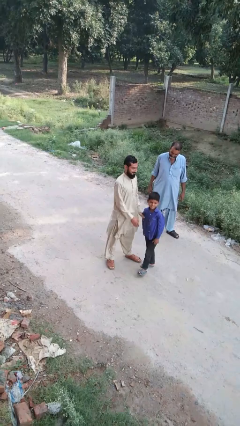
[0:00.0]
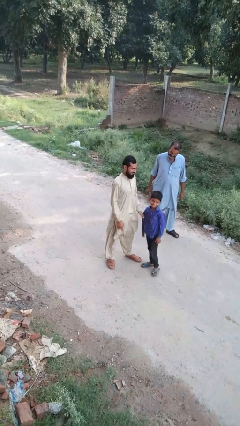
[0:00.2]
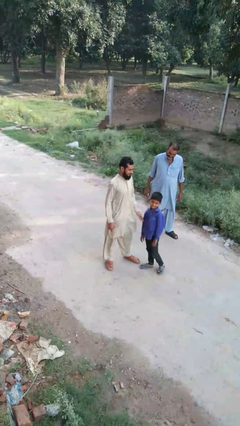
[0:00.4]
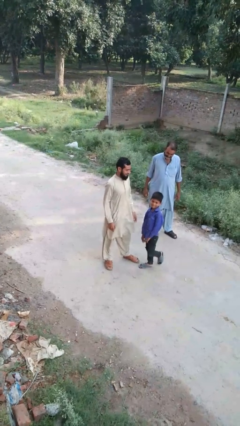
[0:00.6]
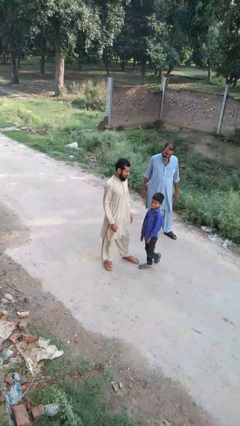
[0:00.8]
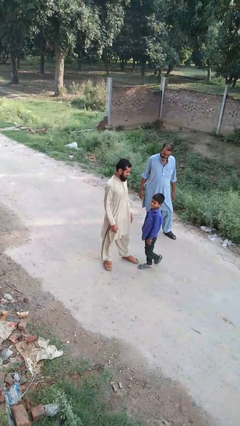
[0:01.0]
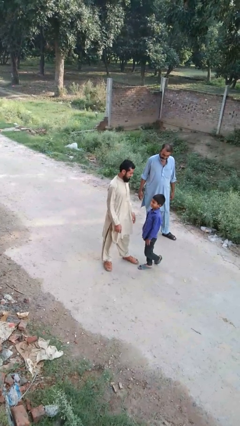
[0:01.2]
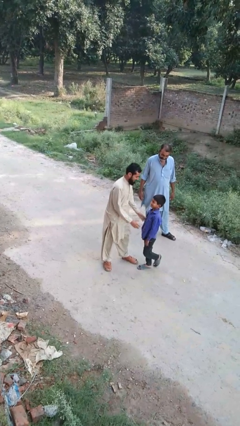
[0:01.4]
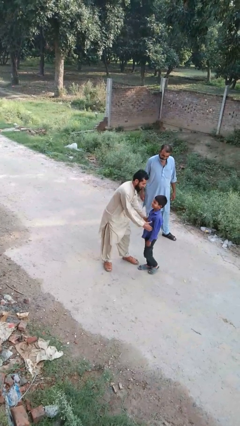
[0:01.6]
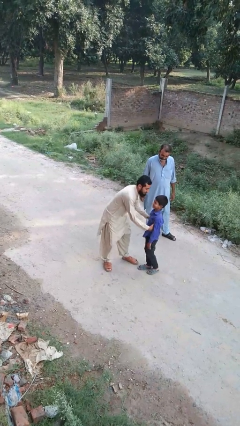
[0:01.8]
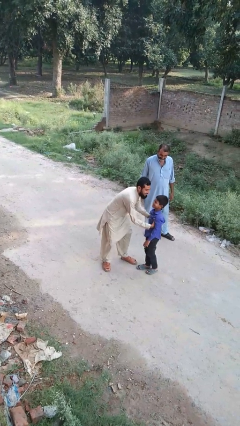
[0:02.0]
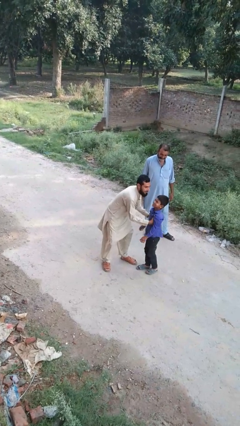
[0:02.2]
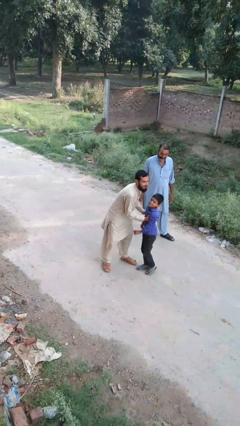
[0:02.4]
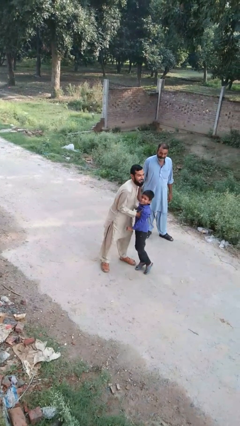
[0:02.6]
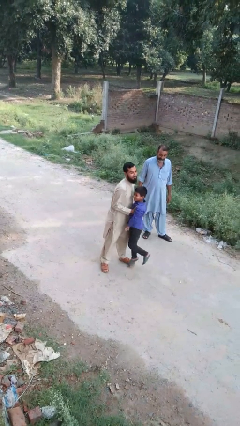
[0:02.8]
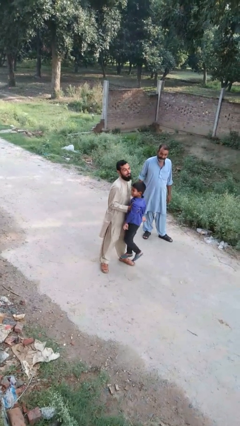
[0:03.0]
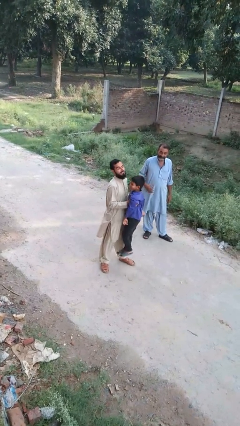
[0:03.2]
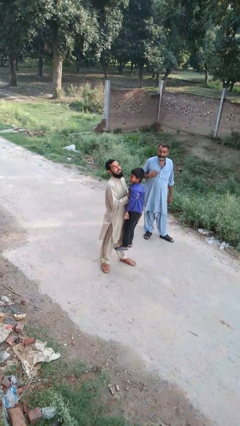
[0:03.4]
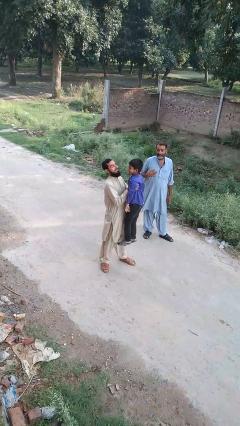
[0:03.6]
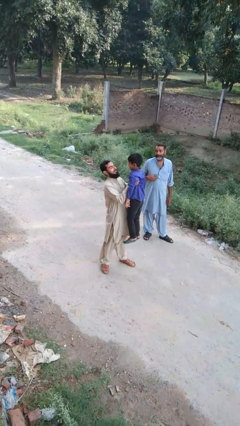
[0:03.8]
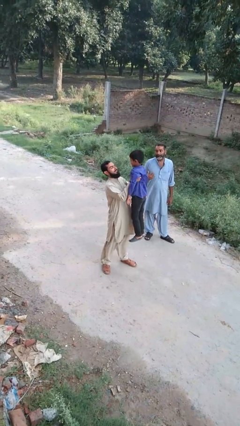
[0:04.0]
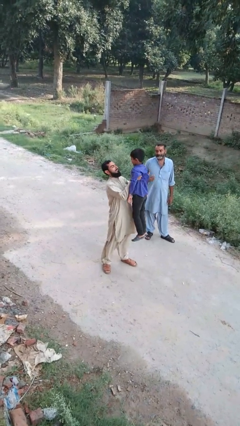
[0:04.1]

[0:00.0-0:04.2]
person picks up person

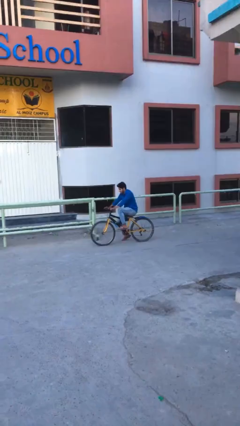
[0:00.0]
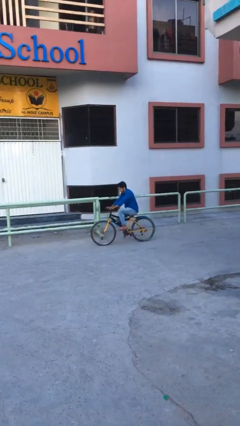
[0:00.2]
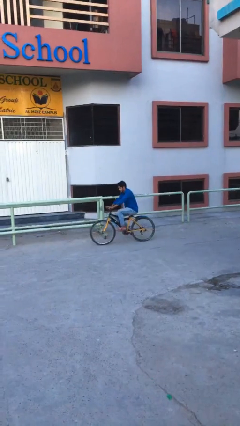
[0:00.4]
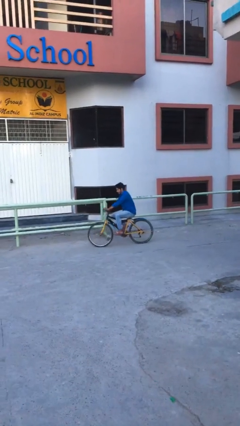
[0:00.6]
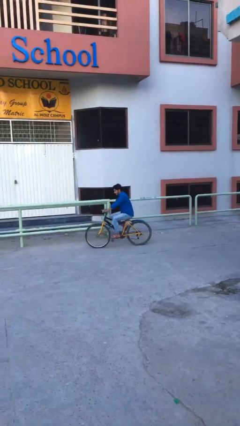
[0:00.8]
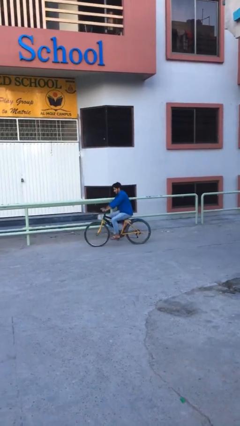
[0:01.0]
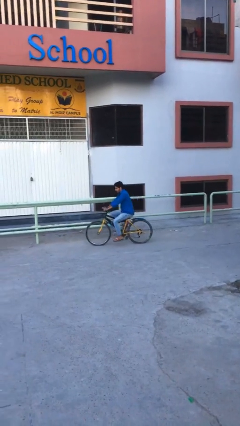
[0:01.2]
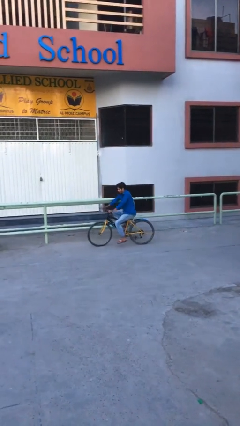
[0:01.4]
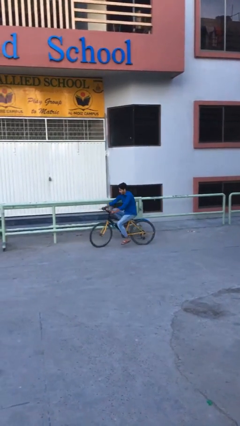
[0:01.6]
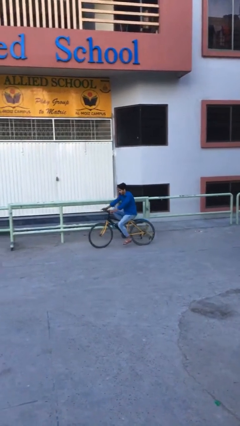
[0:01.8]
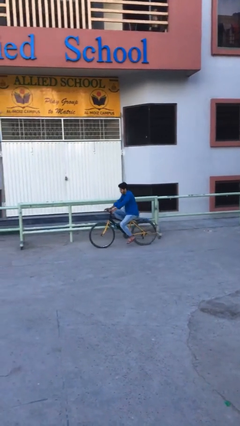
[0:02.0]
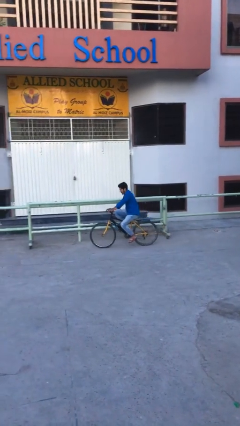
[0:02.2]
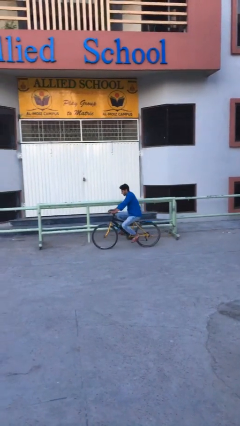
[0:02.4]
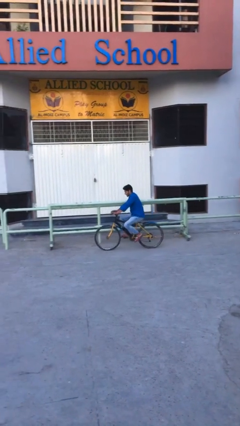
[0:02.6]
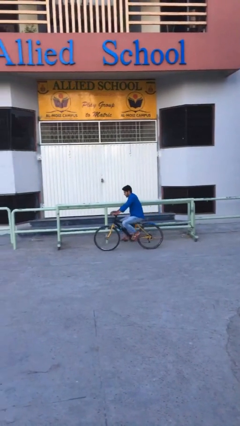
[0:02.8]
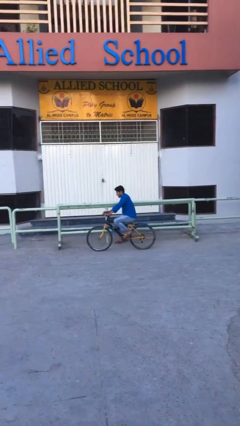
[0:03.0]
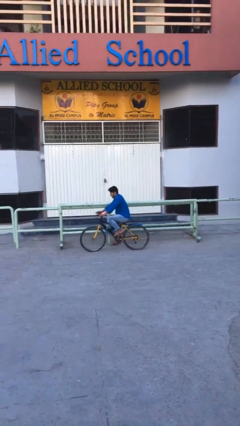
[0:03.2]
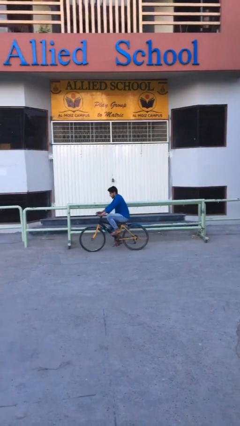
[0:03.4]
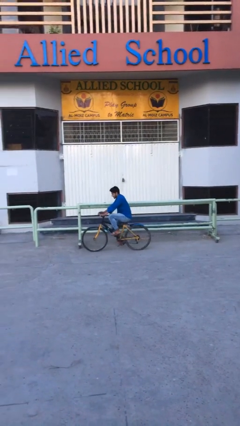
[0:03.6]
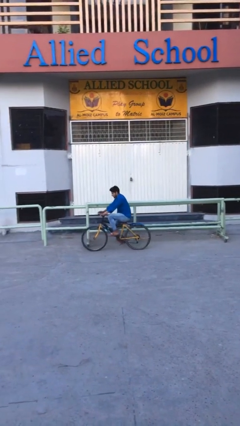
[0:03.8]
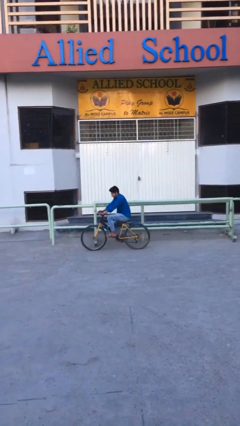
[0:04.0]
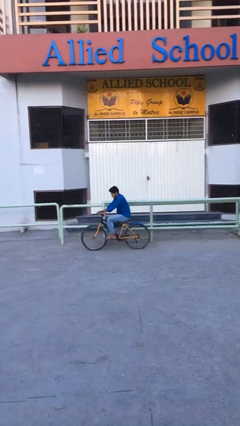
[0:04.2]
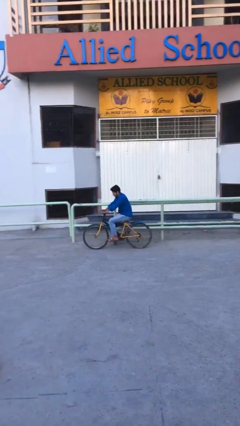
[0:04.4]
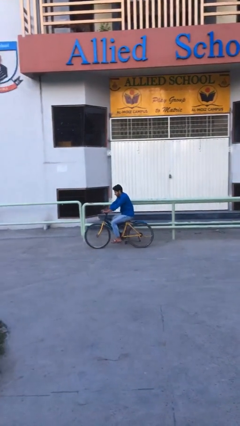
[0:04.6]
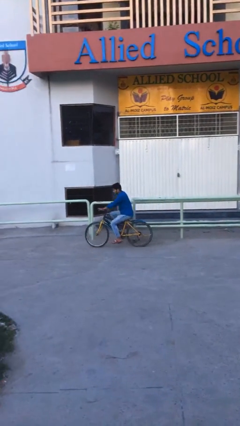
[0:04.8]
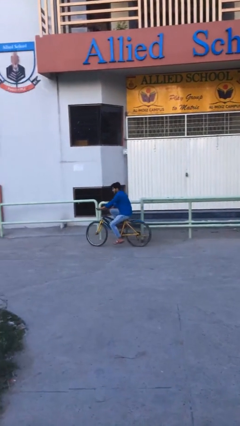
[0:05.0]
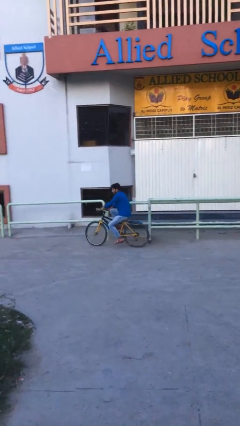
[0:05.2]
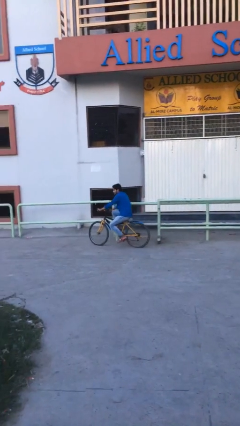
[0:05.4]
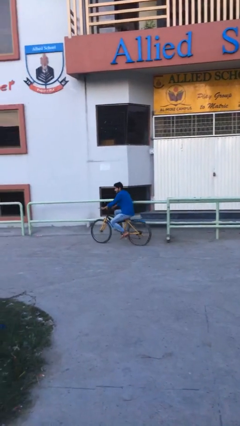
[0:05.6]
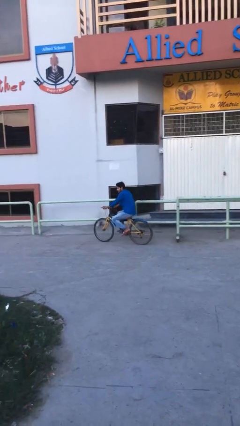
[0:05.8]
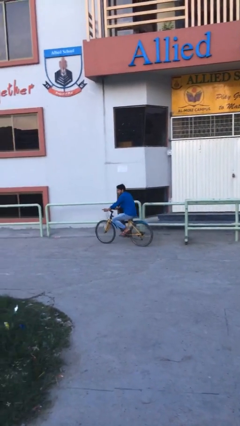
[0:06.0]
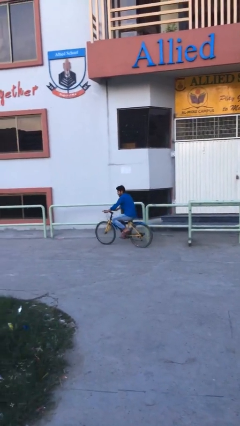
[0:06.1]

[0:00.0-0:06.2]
person rides bicycle

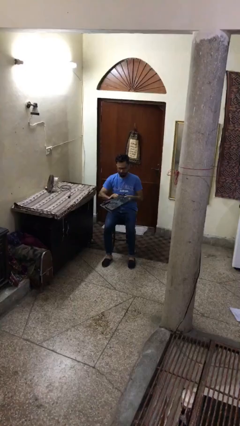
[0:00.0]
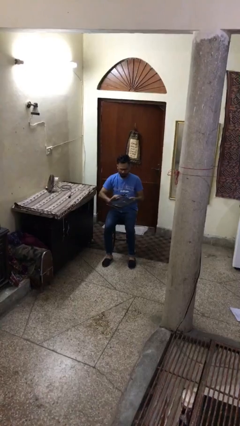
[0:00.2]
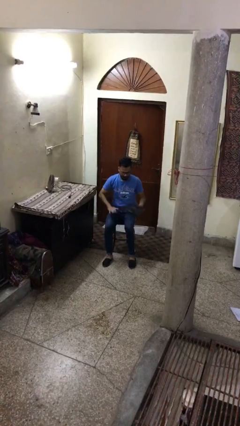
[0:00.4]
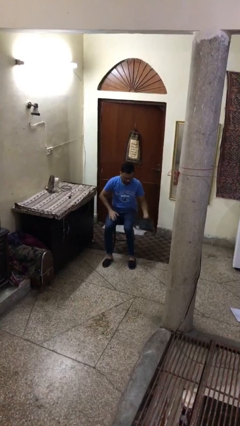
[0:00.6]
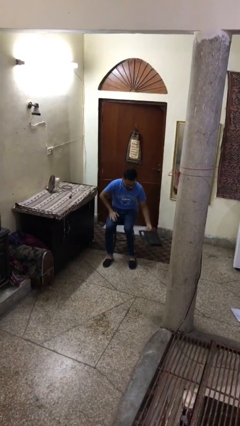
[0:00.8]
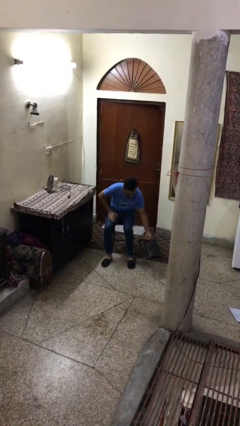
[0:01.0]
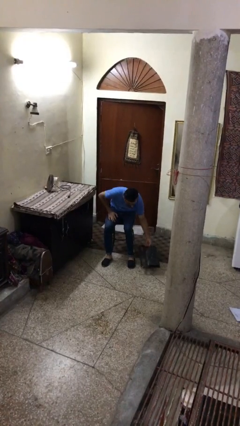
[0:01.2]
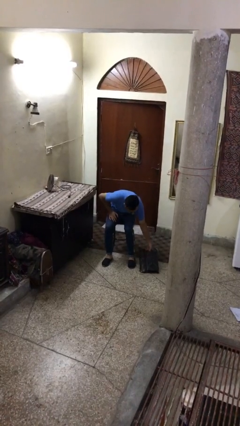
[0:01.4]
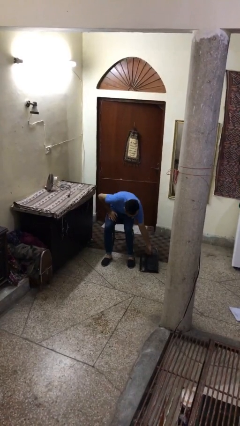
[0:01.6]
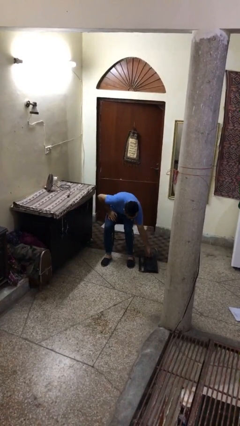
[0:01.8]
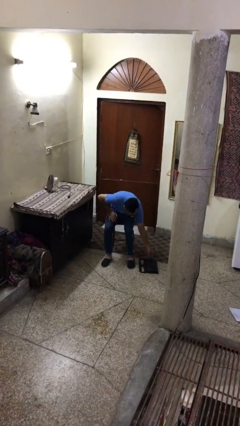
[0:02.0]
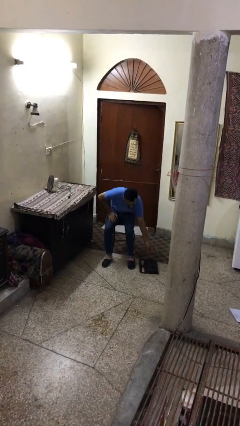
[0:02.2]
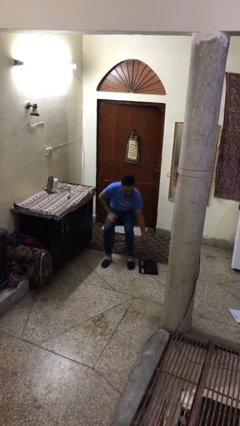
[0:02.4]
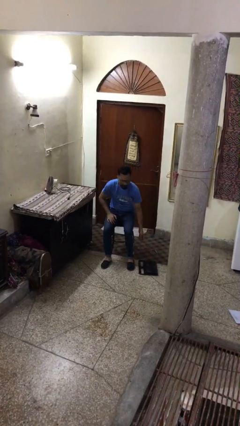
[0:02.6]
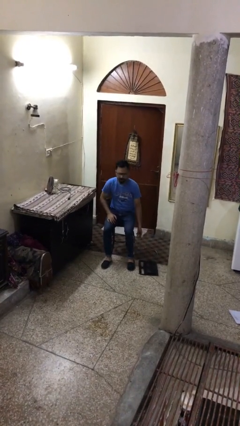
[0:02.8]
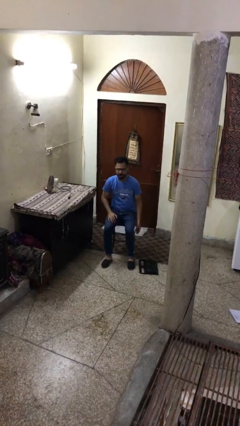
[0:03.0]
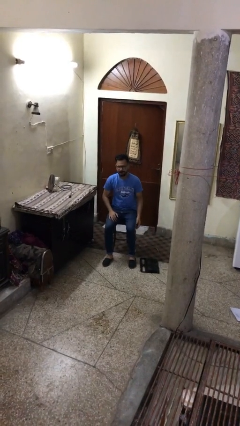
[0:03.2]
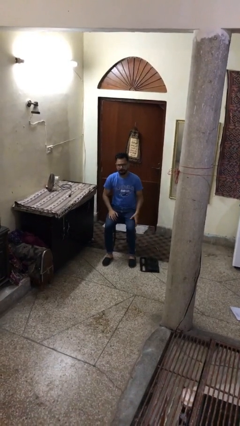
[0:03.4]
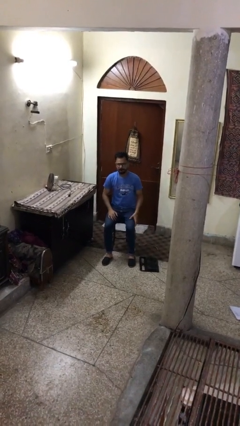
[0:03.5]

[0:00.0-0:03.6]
person puts down object on floor

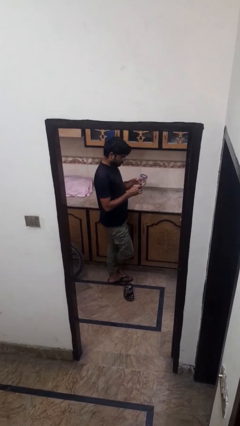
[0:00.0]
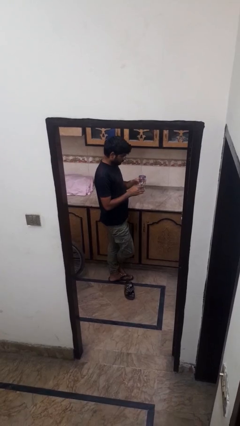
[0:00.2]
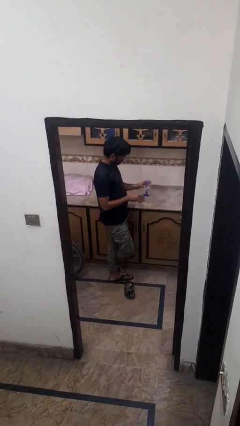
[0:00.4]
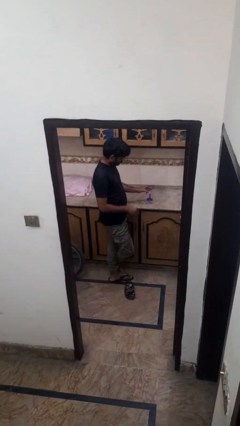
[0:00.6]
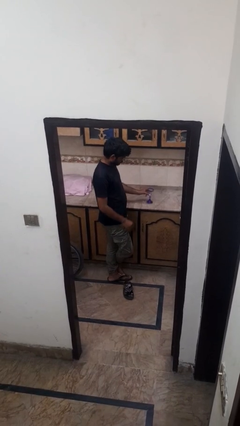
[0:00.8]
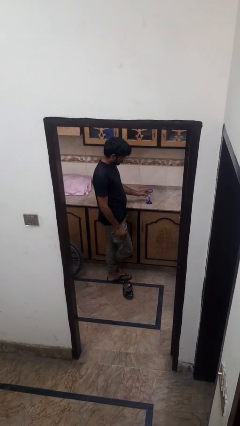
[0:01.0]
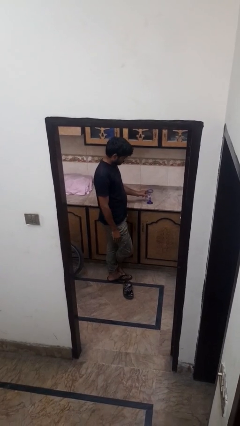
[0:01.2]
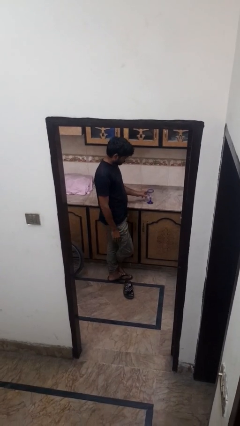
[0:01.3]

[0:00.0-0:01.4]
person puts down object on countertop

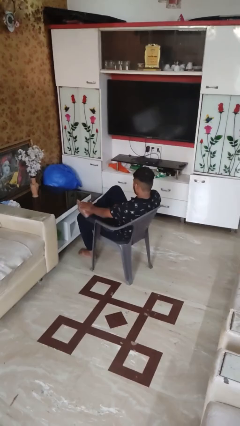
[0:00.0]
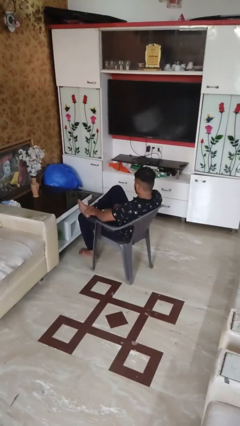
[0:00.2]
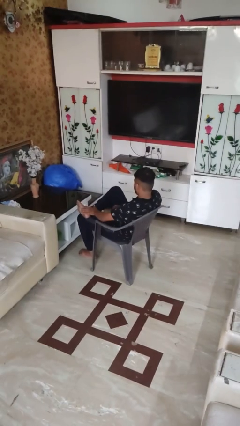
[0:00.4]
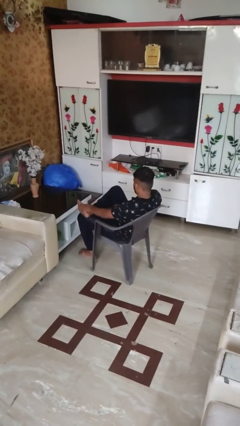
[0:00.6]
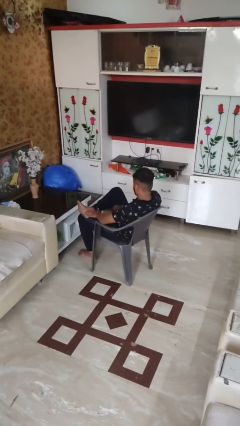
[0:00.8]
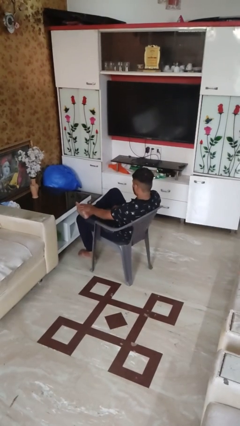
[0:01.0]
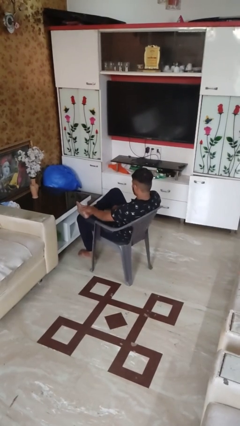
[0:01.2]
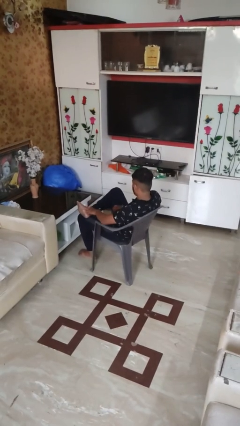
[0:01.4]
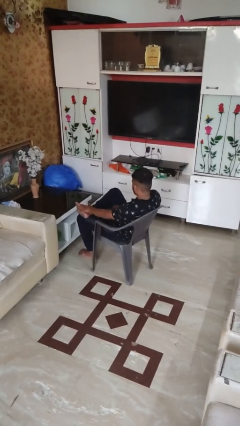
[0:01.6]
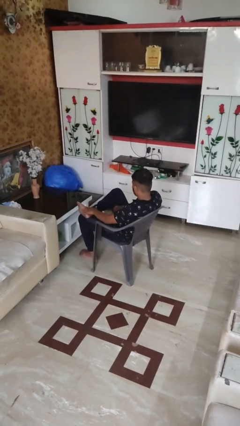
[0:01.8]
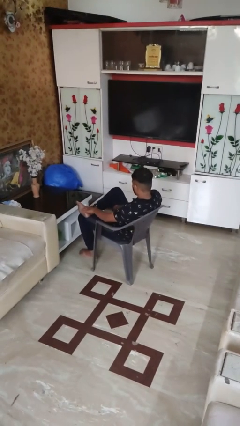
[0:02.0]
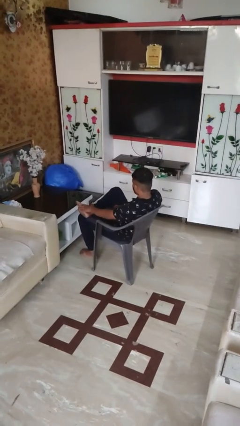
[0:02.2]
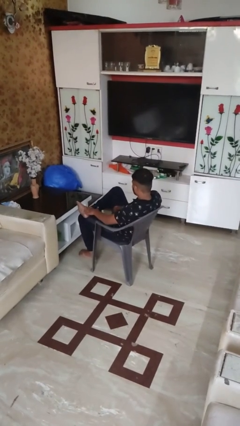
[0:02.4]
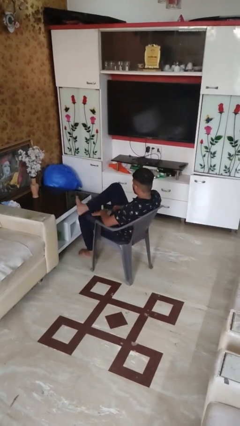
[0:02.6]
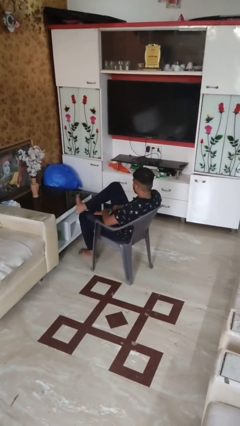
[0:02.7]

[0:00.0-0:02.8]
person rubs foot
